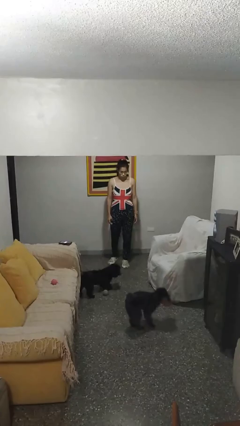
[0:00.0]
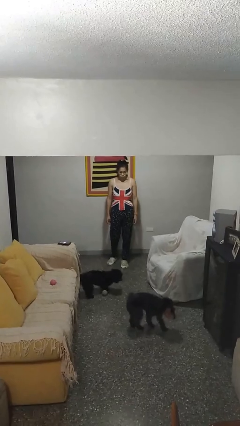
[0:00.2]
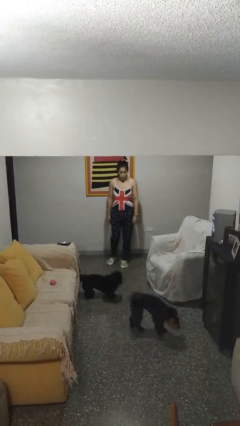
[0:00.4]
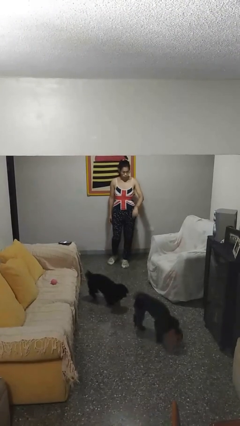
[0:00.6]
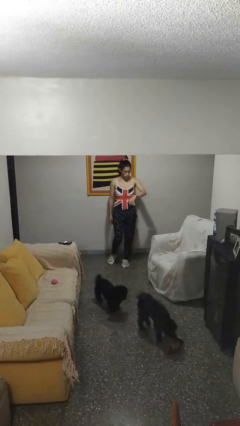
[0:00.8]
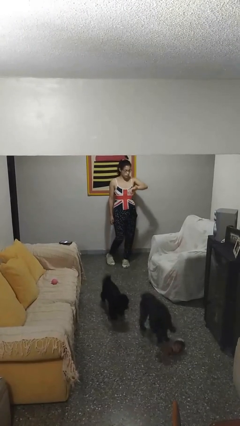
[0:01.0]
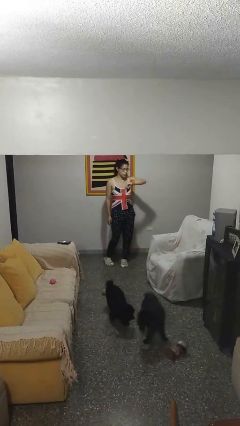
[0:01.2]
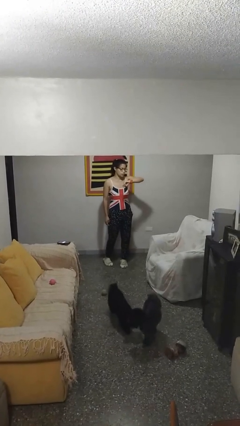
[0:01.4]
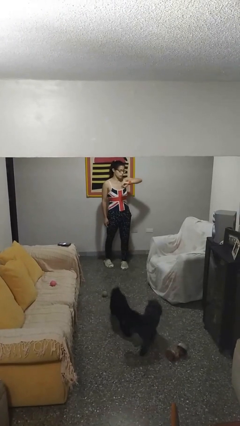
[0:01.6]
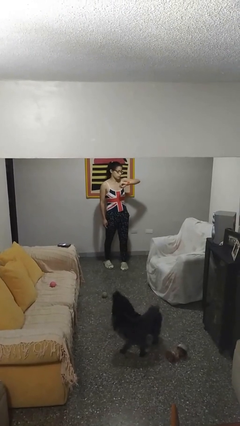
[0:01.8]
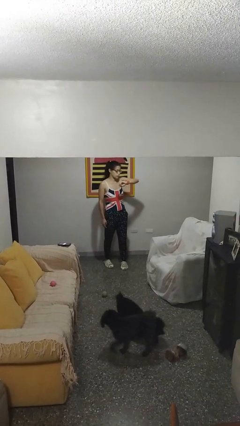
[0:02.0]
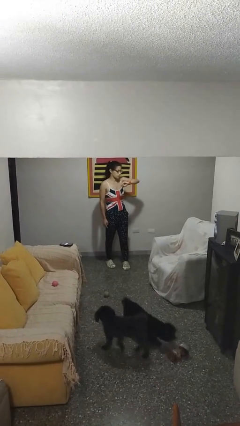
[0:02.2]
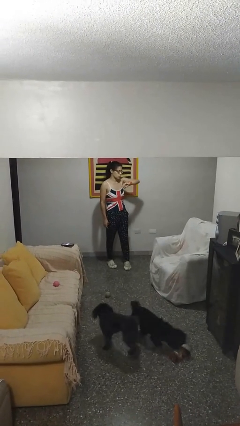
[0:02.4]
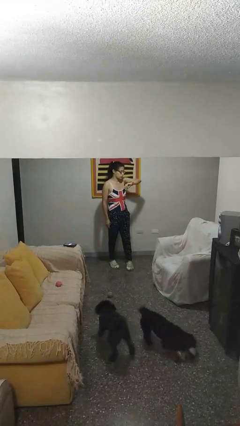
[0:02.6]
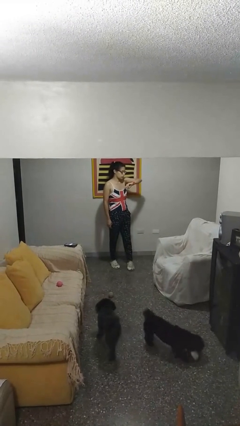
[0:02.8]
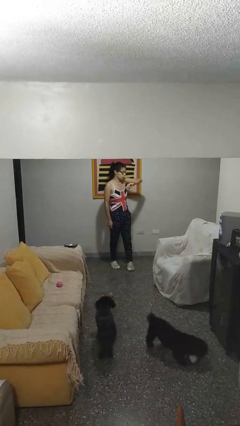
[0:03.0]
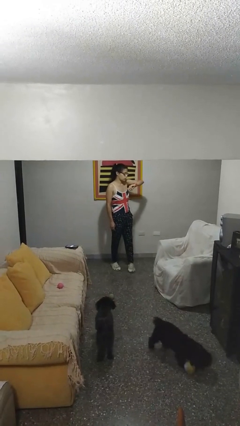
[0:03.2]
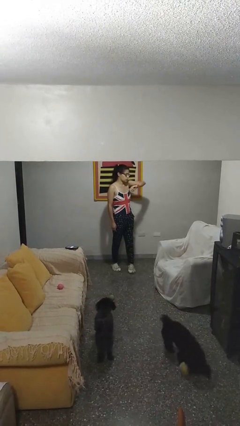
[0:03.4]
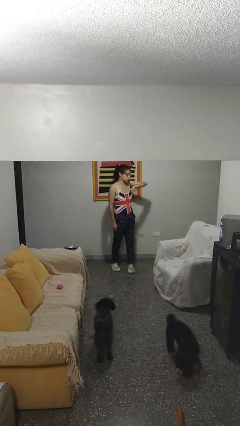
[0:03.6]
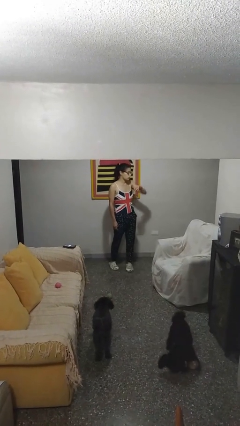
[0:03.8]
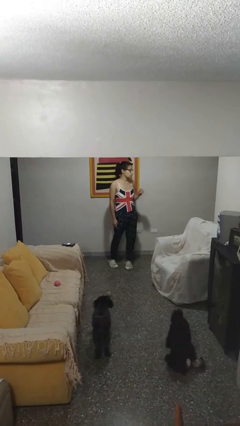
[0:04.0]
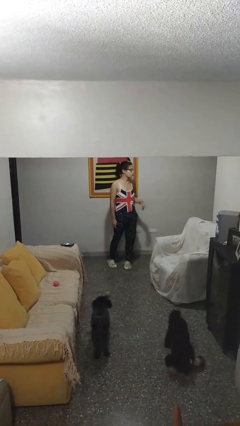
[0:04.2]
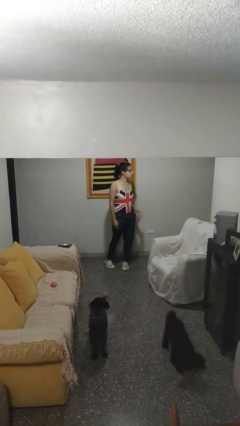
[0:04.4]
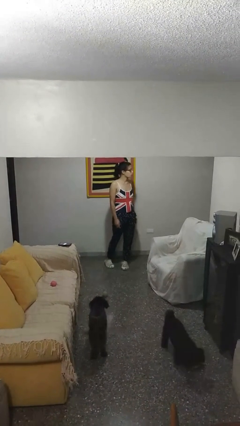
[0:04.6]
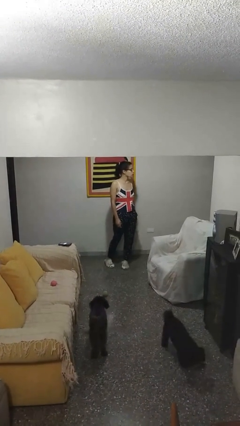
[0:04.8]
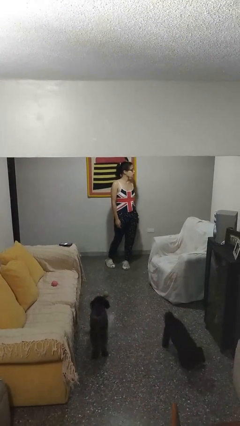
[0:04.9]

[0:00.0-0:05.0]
person looks at wristwatch

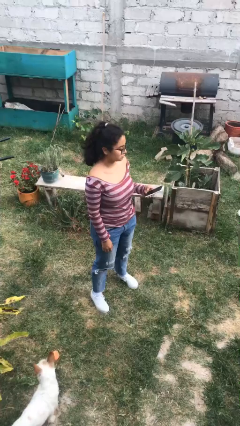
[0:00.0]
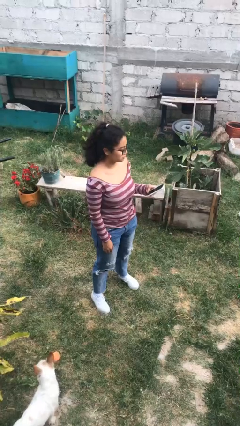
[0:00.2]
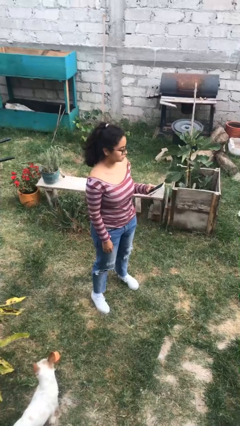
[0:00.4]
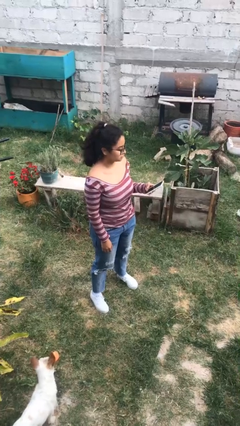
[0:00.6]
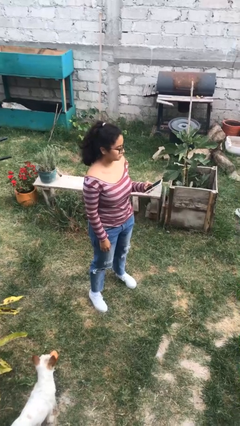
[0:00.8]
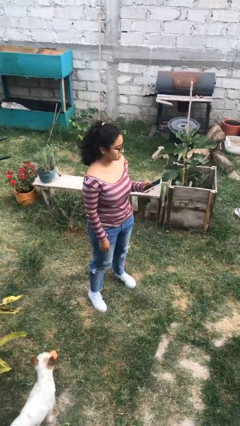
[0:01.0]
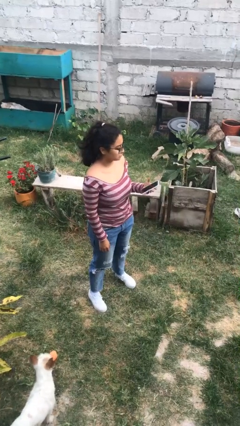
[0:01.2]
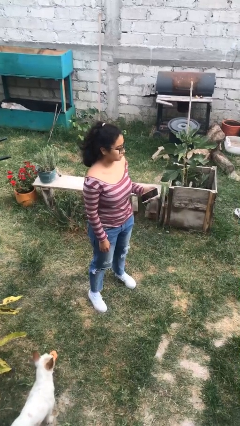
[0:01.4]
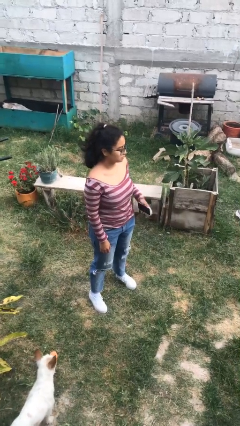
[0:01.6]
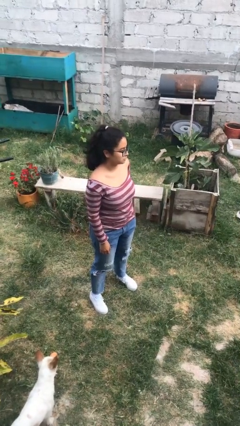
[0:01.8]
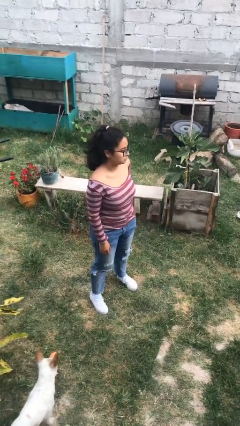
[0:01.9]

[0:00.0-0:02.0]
person puts phone into pocket

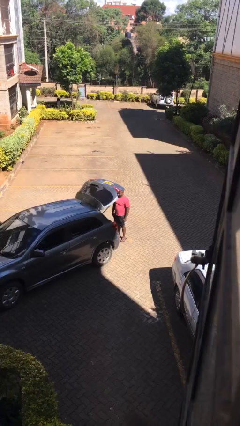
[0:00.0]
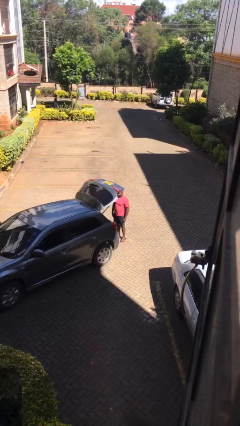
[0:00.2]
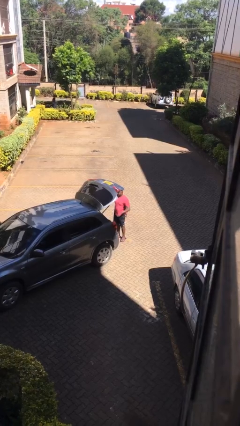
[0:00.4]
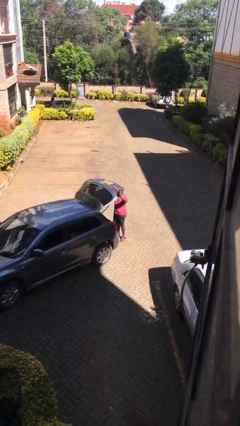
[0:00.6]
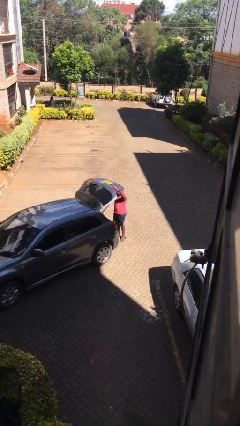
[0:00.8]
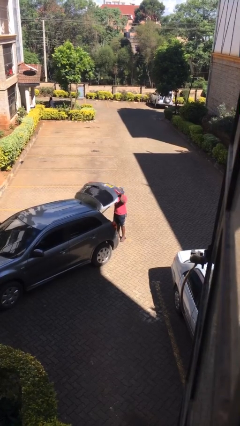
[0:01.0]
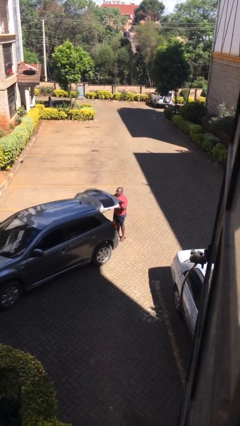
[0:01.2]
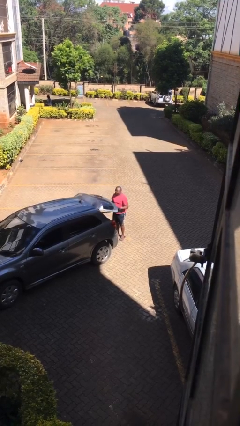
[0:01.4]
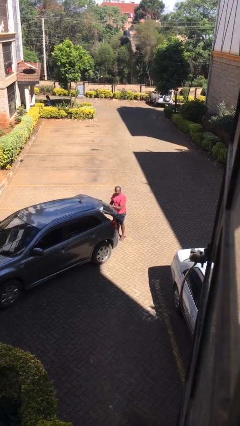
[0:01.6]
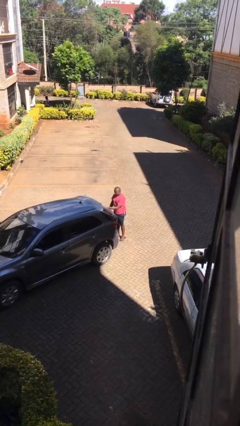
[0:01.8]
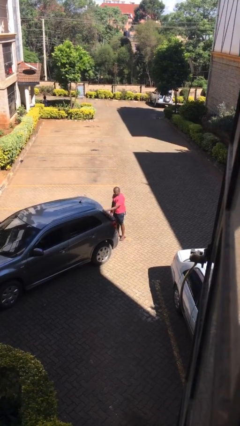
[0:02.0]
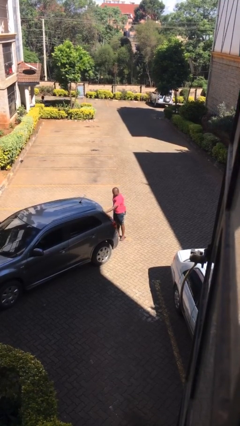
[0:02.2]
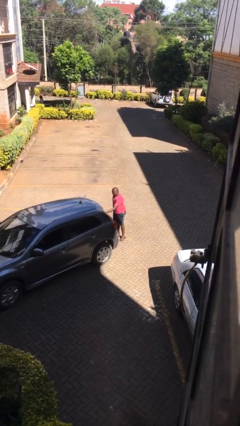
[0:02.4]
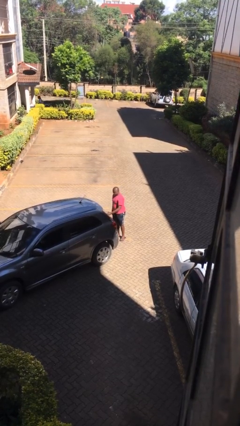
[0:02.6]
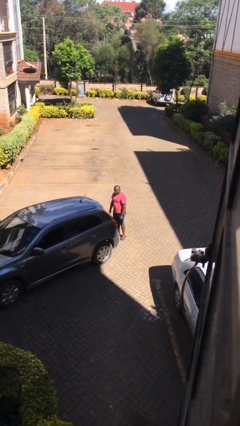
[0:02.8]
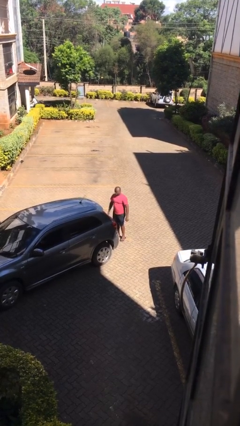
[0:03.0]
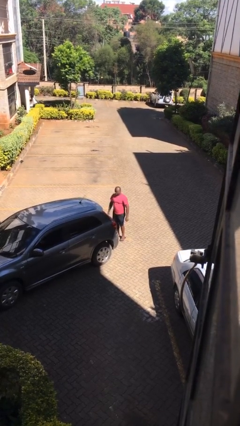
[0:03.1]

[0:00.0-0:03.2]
person closes car trunk

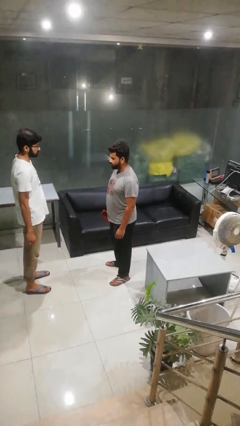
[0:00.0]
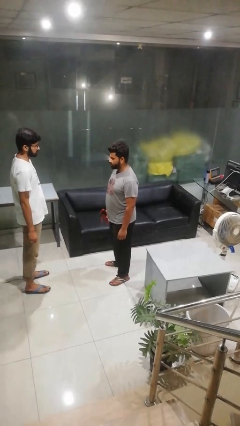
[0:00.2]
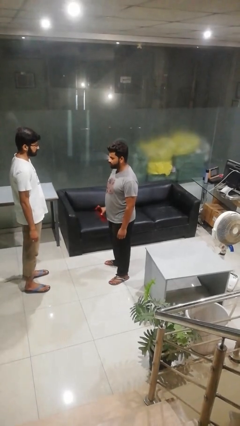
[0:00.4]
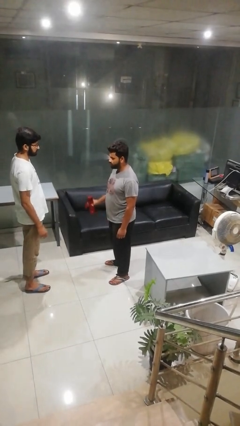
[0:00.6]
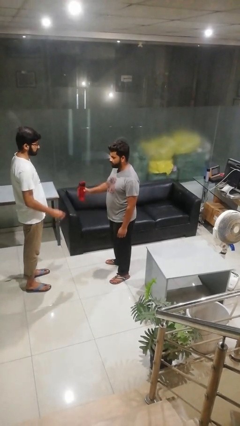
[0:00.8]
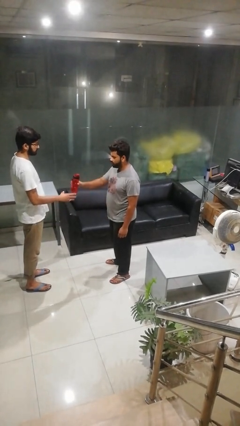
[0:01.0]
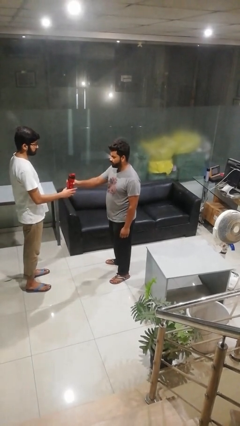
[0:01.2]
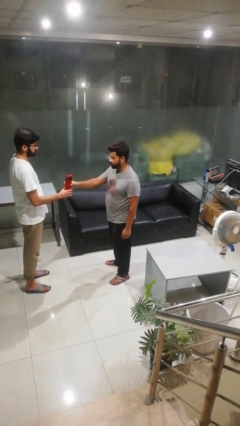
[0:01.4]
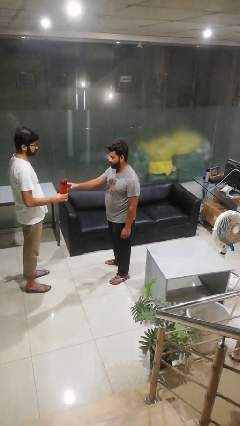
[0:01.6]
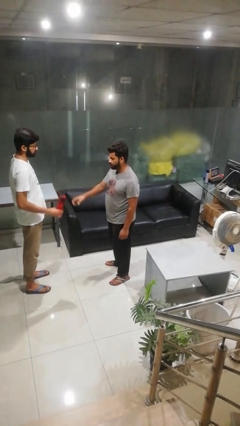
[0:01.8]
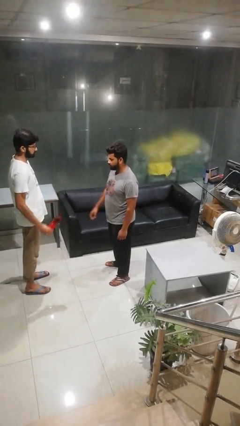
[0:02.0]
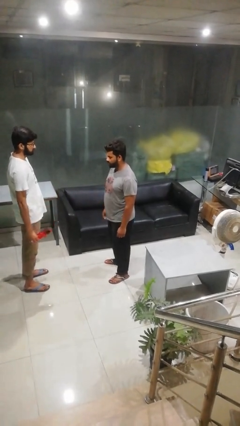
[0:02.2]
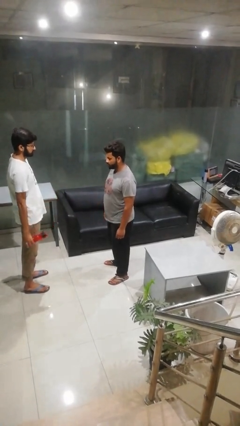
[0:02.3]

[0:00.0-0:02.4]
person transfers object to person

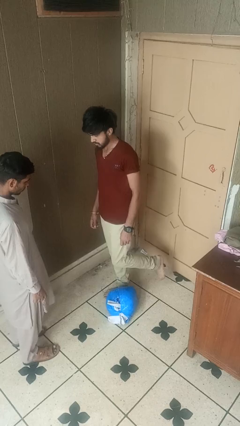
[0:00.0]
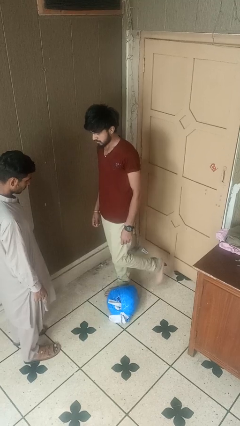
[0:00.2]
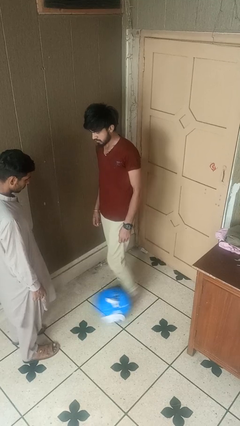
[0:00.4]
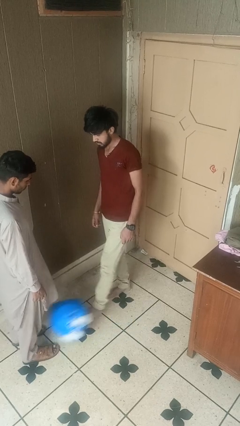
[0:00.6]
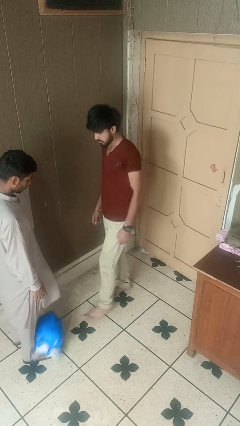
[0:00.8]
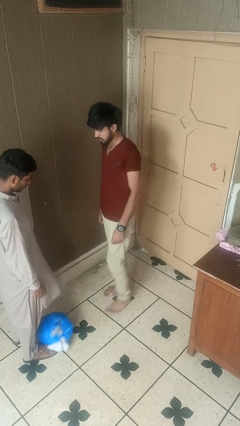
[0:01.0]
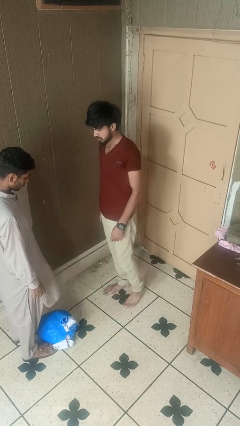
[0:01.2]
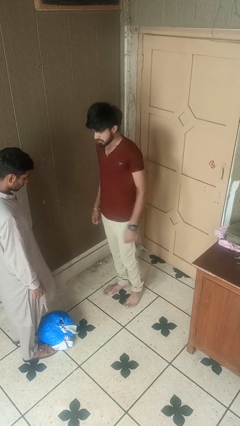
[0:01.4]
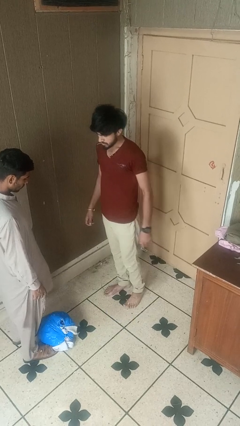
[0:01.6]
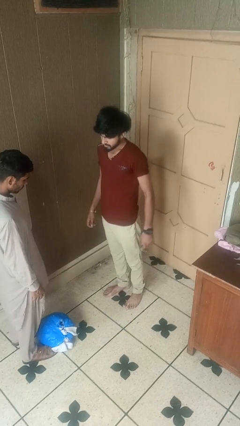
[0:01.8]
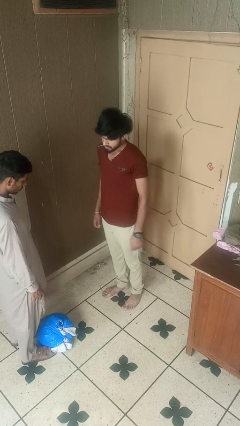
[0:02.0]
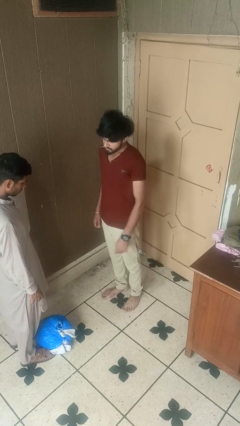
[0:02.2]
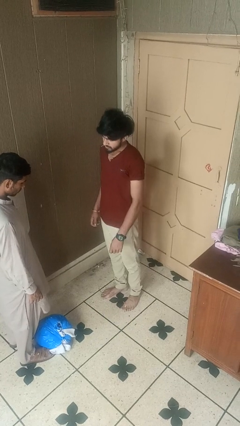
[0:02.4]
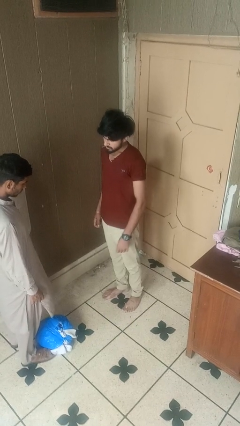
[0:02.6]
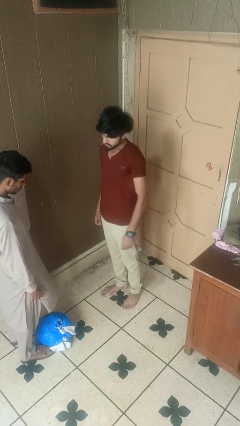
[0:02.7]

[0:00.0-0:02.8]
person kicks object to person

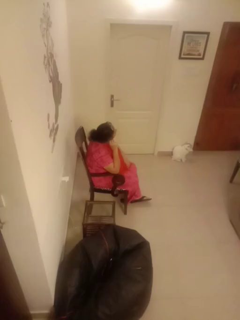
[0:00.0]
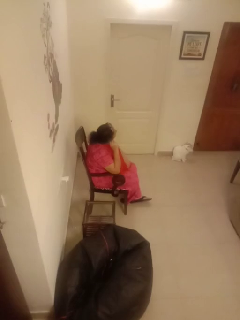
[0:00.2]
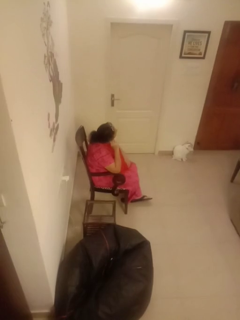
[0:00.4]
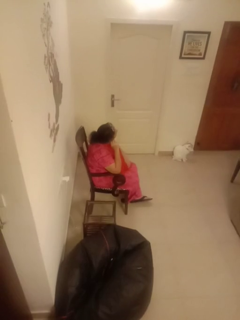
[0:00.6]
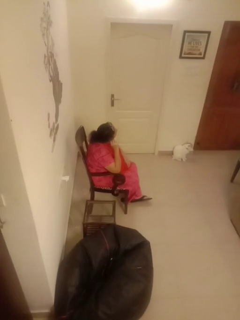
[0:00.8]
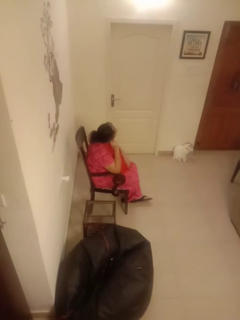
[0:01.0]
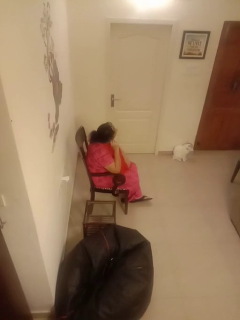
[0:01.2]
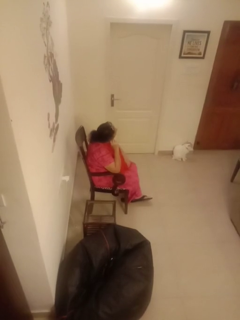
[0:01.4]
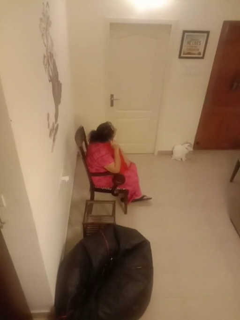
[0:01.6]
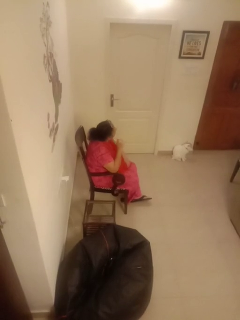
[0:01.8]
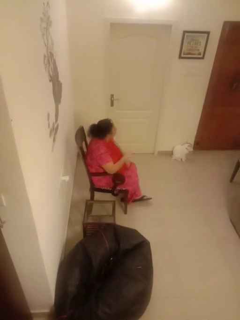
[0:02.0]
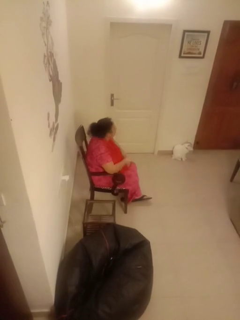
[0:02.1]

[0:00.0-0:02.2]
person touches earlobe

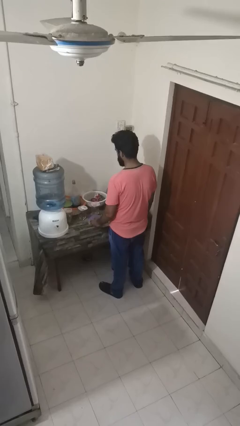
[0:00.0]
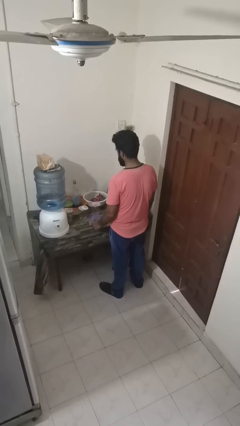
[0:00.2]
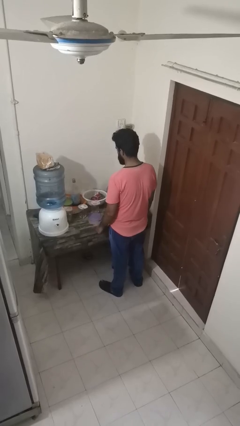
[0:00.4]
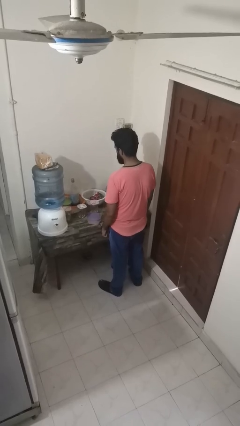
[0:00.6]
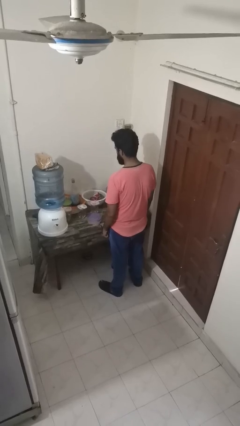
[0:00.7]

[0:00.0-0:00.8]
person puts down object on countertop
